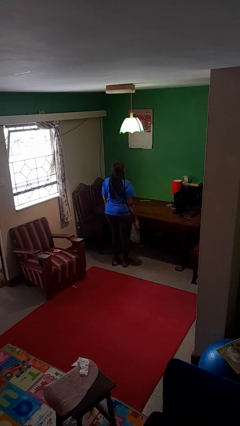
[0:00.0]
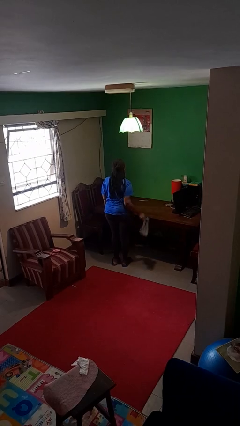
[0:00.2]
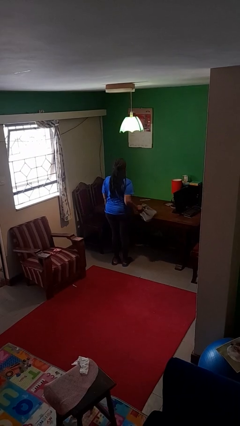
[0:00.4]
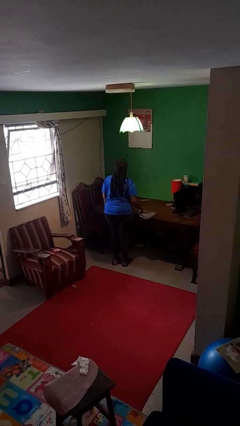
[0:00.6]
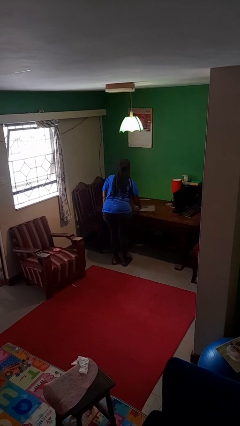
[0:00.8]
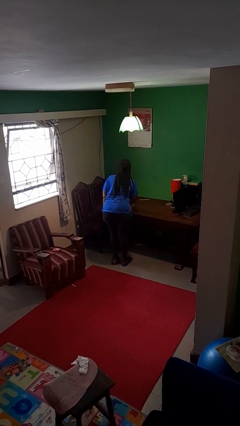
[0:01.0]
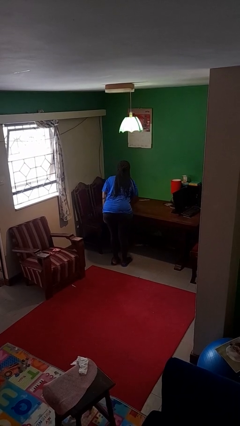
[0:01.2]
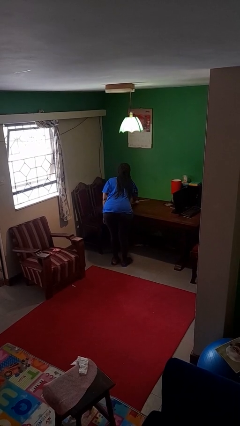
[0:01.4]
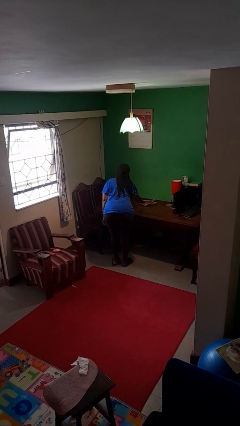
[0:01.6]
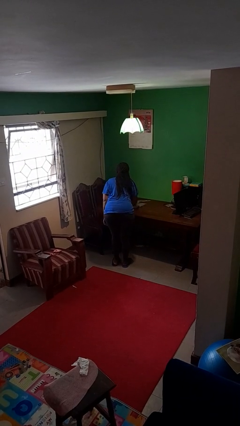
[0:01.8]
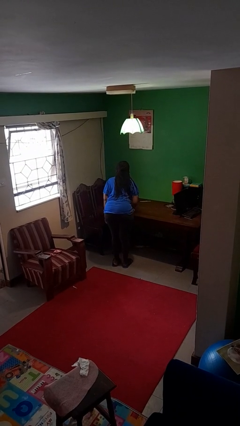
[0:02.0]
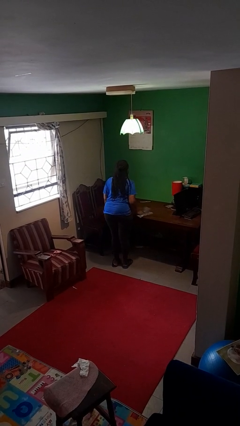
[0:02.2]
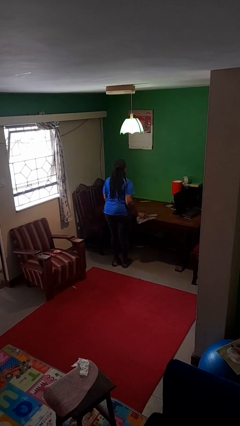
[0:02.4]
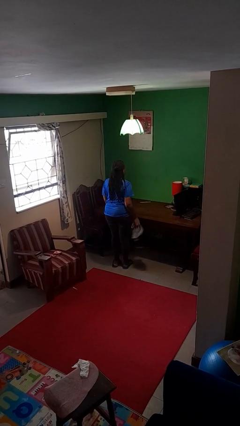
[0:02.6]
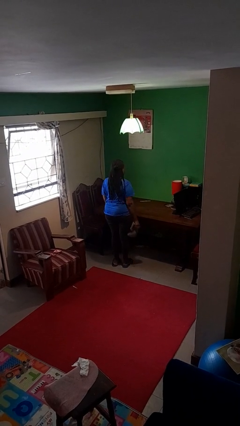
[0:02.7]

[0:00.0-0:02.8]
person cleans table with rag

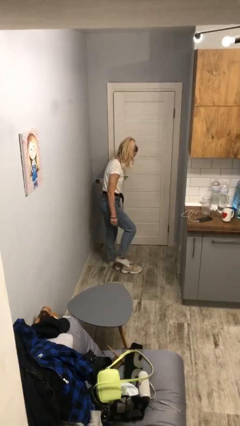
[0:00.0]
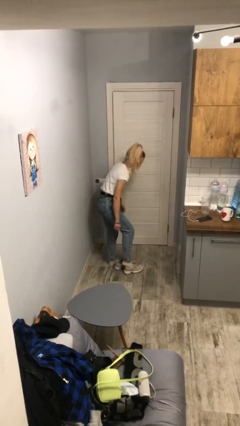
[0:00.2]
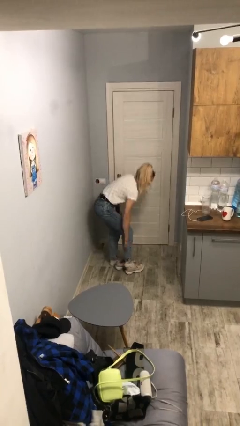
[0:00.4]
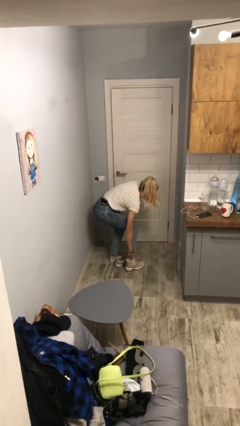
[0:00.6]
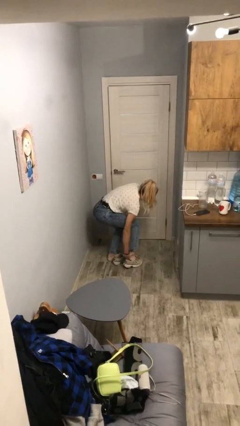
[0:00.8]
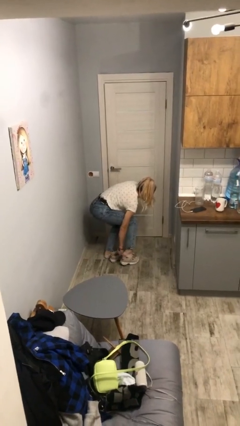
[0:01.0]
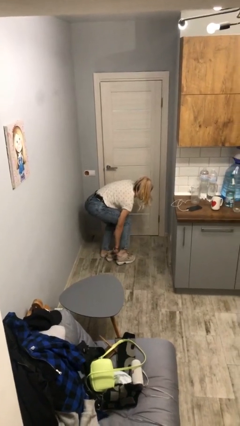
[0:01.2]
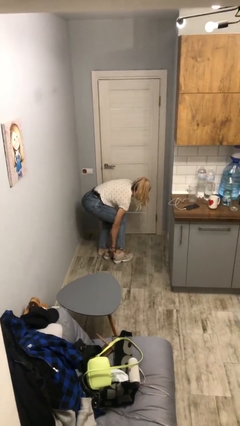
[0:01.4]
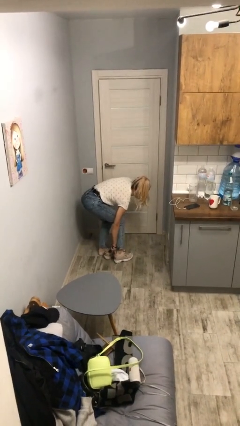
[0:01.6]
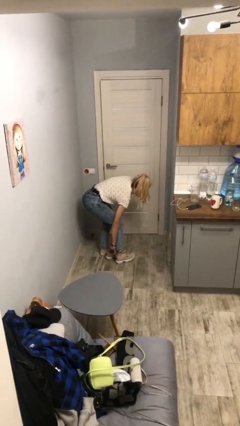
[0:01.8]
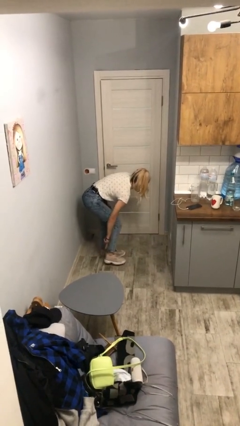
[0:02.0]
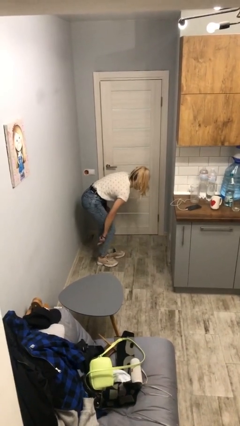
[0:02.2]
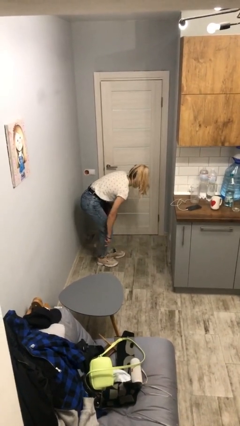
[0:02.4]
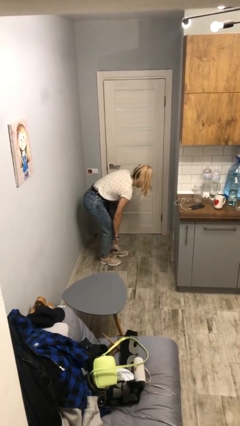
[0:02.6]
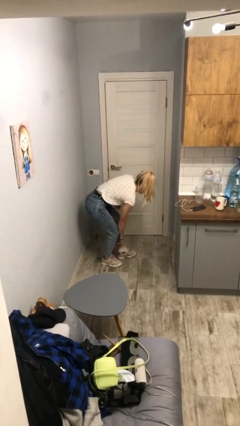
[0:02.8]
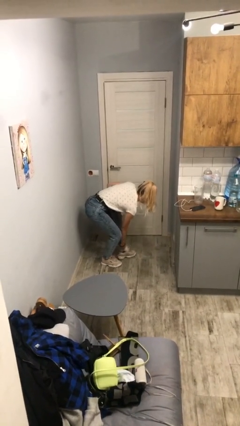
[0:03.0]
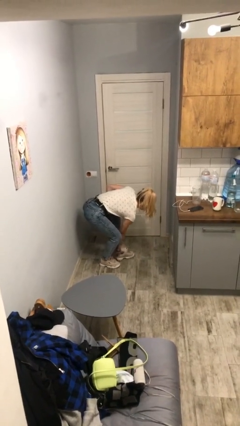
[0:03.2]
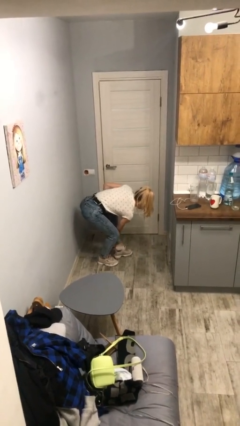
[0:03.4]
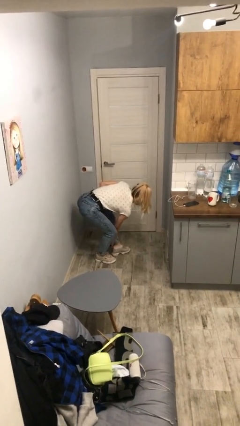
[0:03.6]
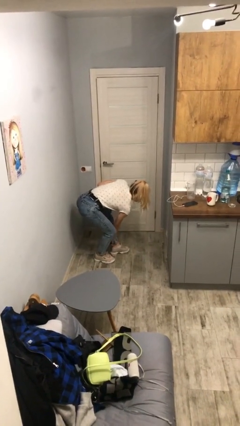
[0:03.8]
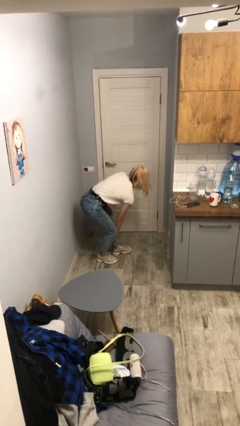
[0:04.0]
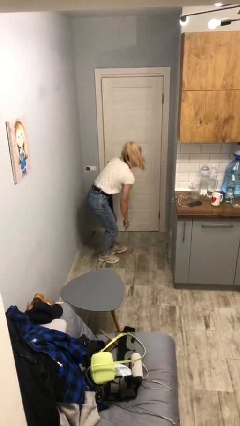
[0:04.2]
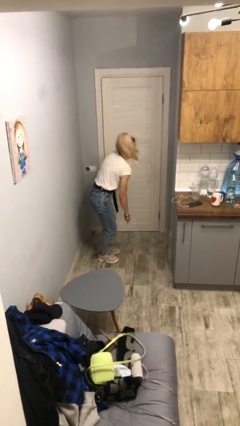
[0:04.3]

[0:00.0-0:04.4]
person puts on shoes

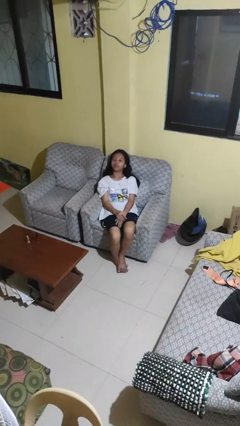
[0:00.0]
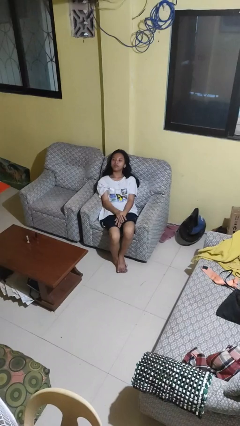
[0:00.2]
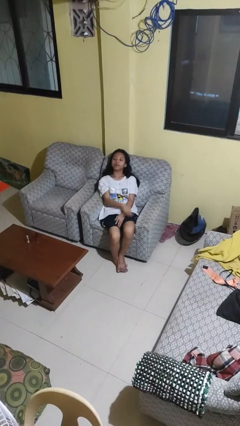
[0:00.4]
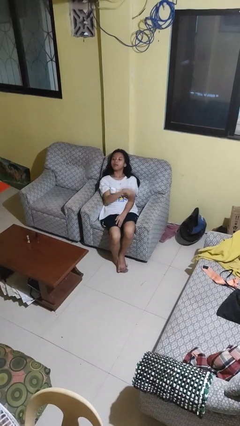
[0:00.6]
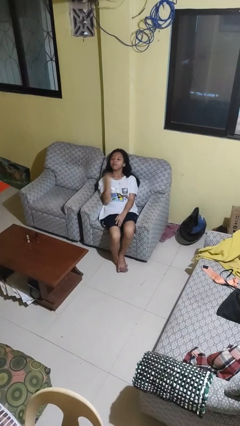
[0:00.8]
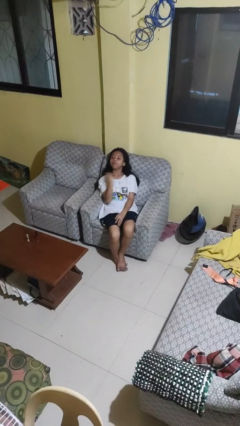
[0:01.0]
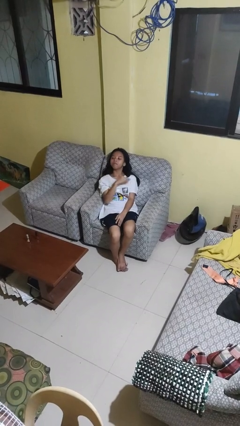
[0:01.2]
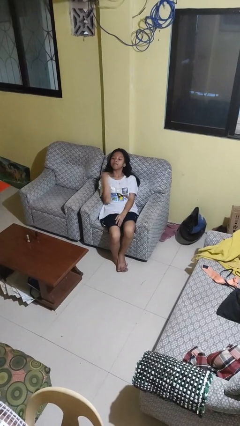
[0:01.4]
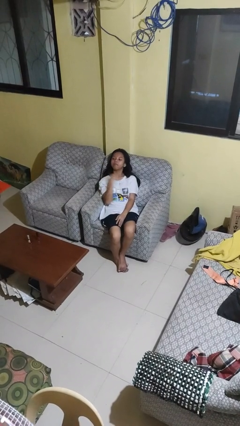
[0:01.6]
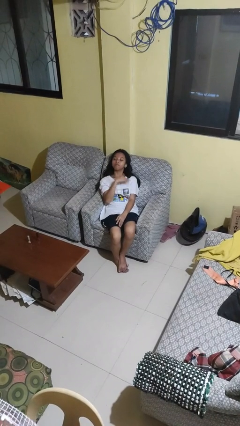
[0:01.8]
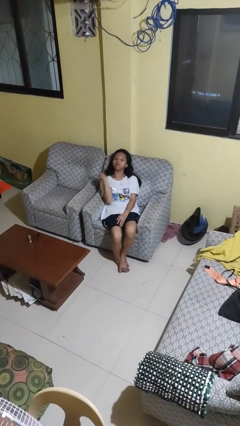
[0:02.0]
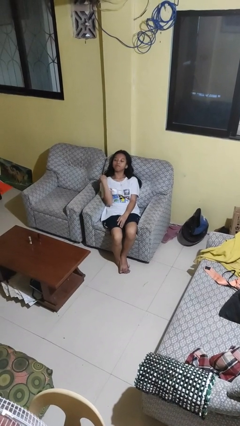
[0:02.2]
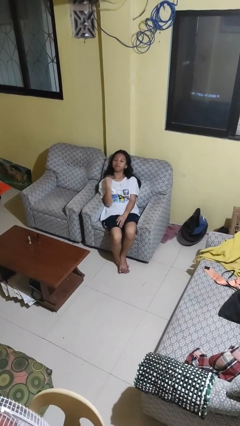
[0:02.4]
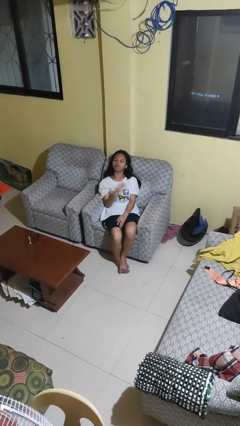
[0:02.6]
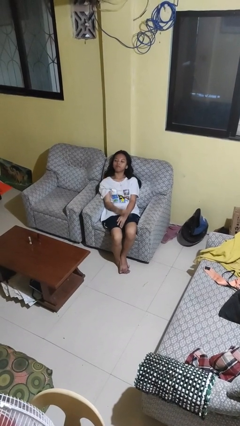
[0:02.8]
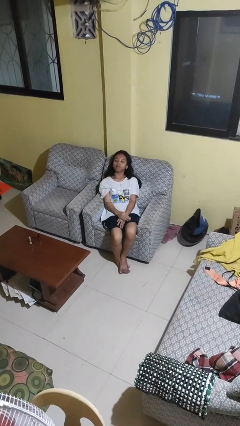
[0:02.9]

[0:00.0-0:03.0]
person gestures cut

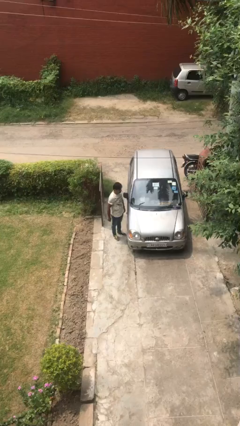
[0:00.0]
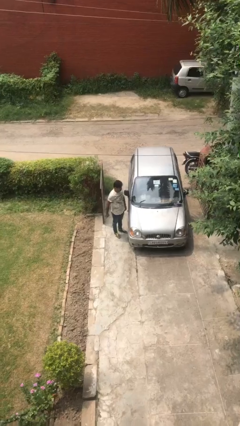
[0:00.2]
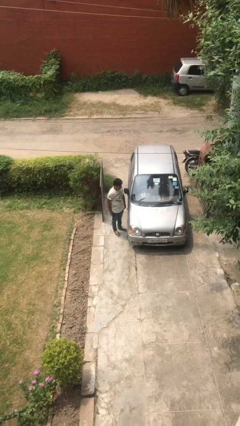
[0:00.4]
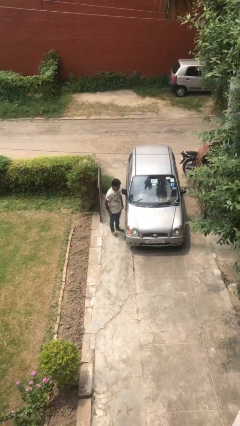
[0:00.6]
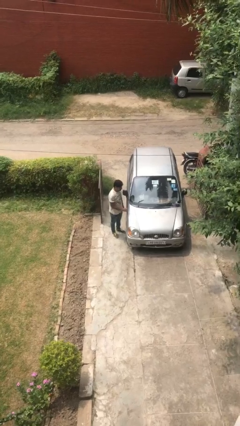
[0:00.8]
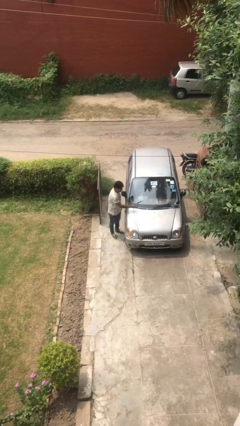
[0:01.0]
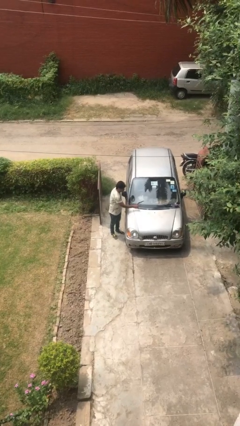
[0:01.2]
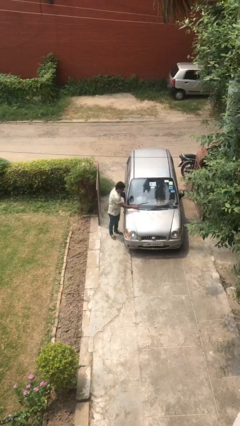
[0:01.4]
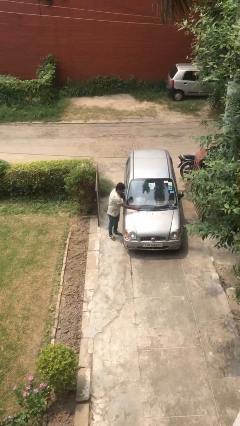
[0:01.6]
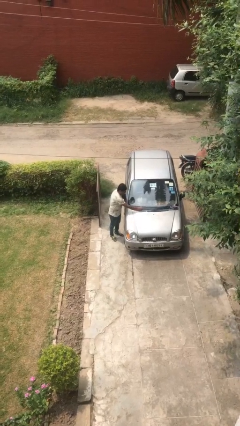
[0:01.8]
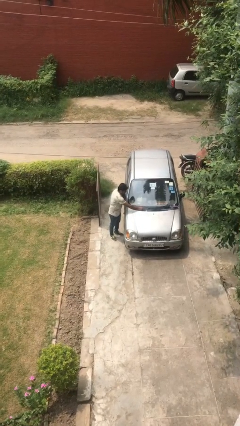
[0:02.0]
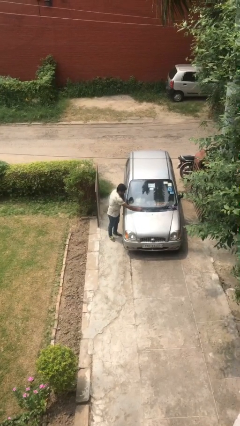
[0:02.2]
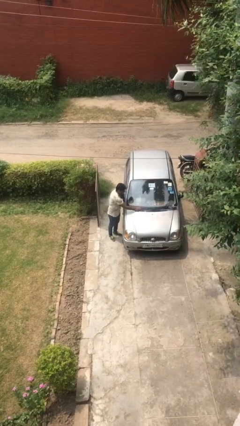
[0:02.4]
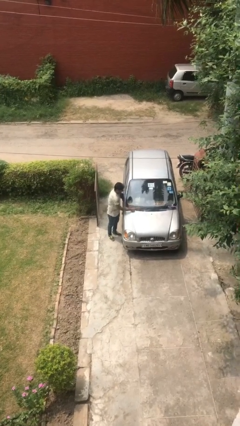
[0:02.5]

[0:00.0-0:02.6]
person flips down car wipers

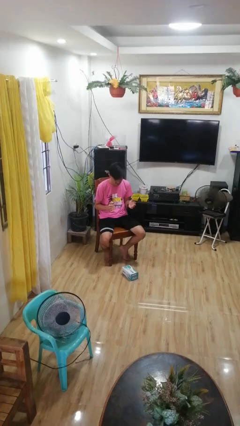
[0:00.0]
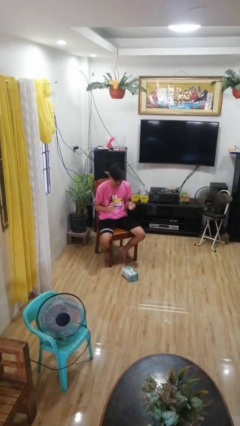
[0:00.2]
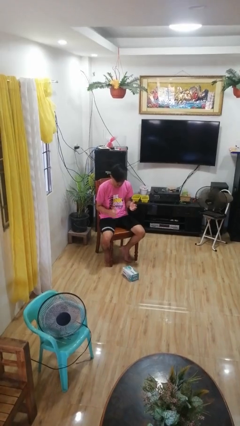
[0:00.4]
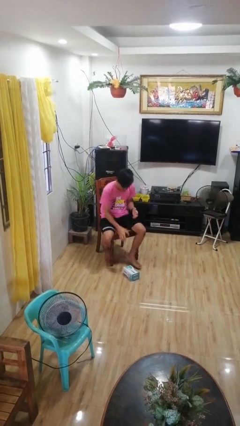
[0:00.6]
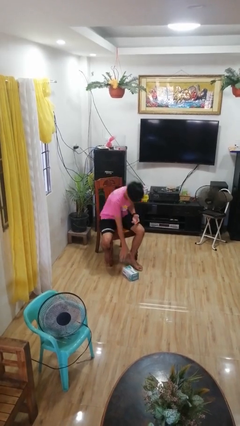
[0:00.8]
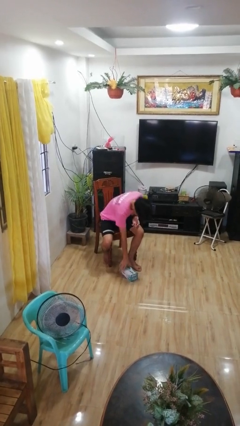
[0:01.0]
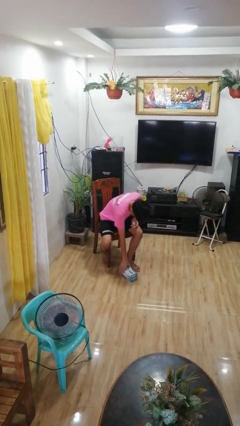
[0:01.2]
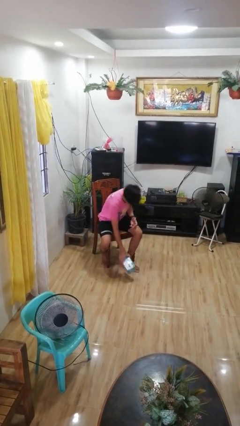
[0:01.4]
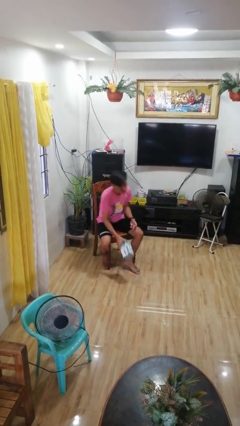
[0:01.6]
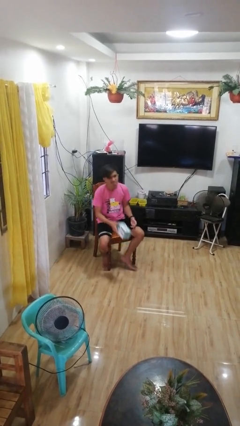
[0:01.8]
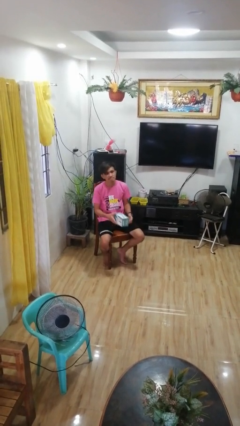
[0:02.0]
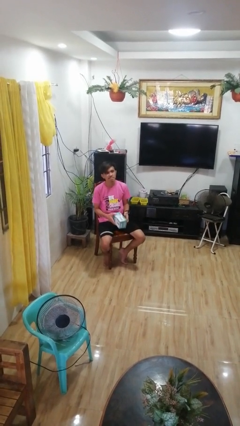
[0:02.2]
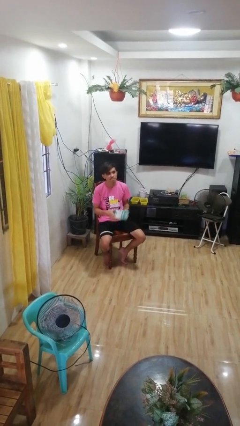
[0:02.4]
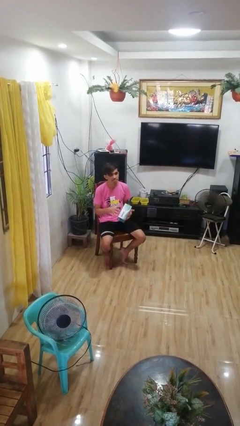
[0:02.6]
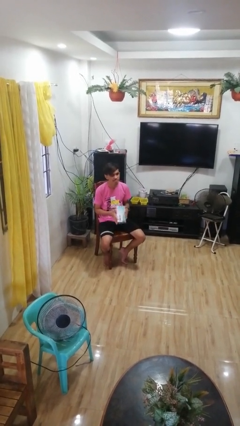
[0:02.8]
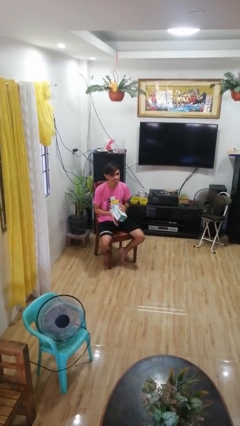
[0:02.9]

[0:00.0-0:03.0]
person picks up object from floor

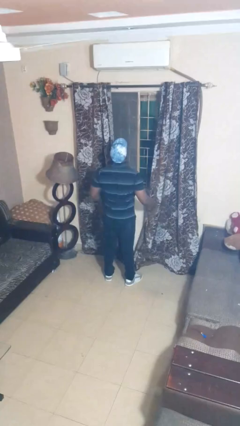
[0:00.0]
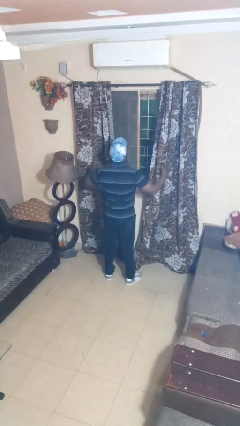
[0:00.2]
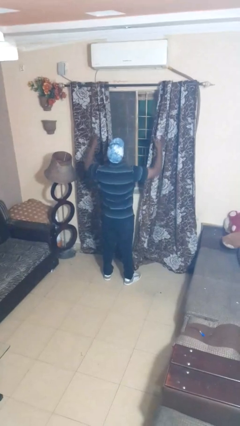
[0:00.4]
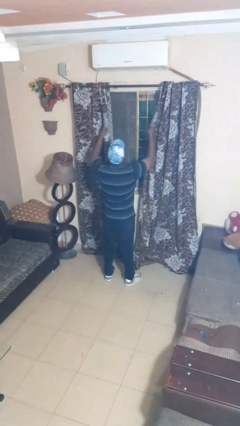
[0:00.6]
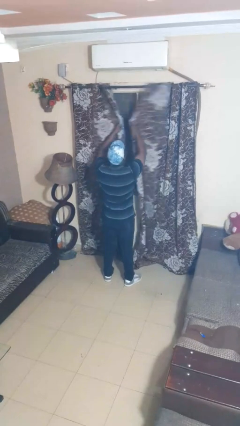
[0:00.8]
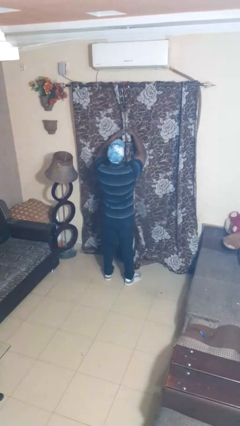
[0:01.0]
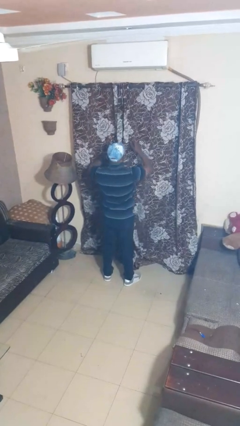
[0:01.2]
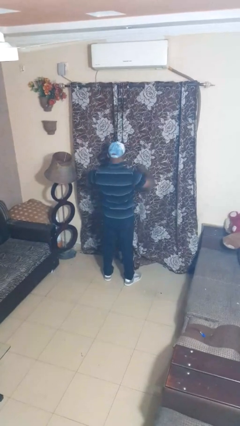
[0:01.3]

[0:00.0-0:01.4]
person closes curtains
